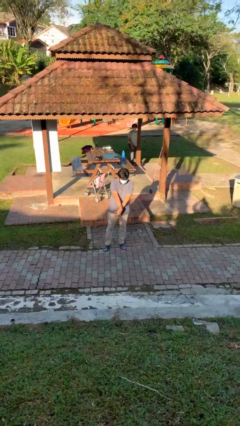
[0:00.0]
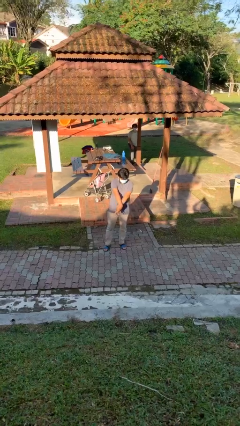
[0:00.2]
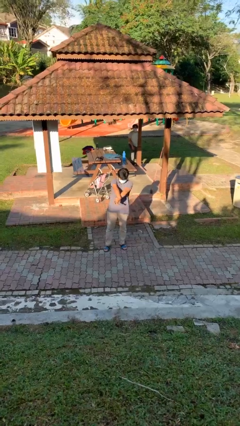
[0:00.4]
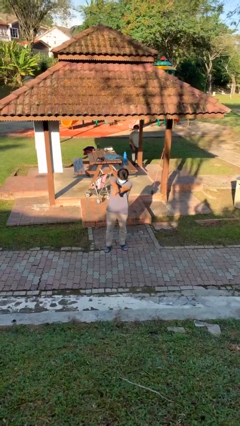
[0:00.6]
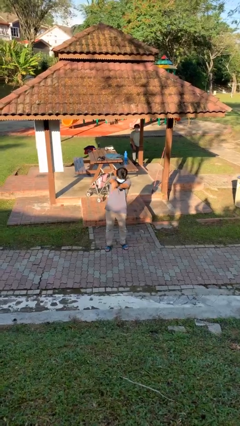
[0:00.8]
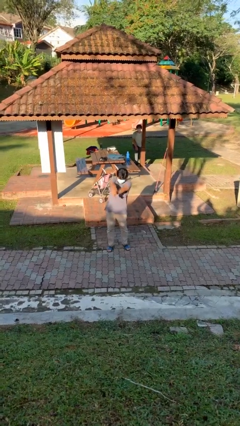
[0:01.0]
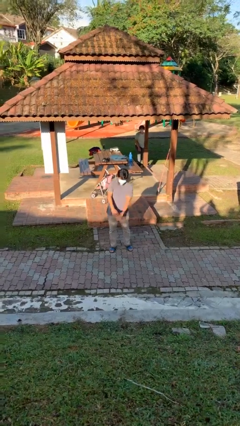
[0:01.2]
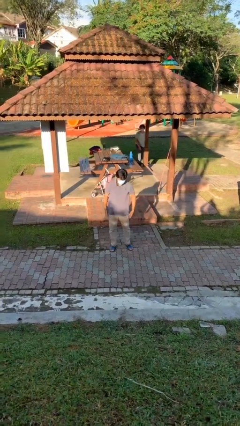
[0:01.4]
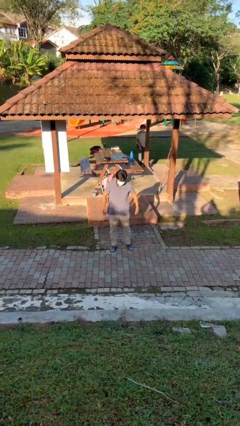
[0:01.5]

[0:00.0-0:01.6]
person crosses arms

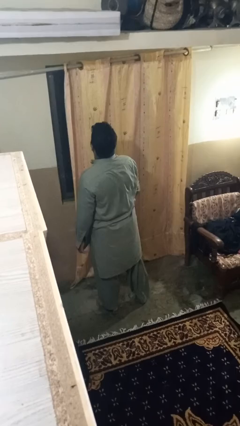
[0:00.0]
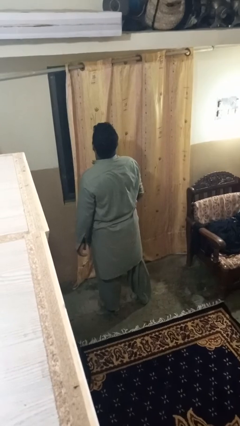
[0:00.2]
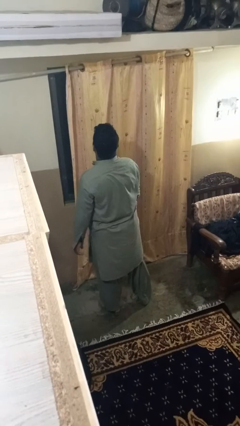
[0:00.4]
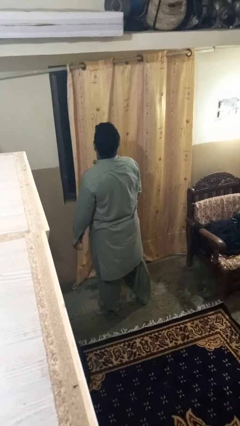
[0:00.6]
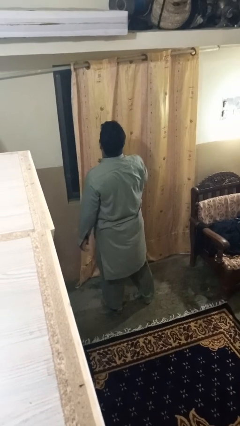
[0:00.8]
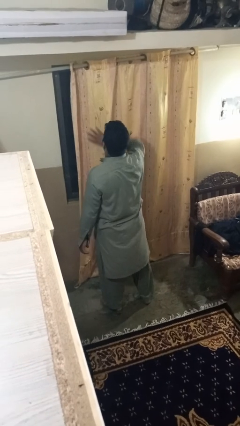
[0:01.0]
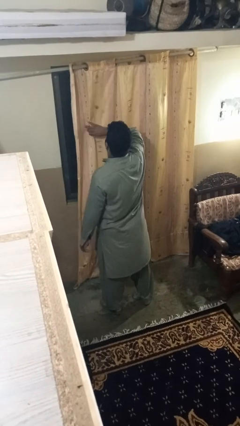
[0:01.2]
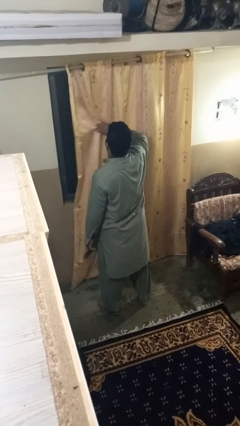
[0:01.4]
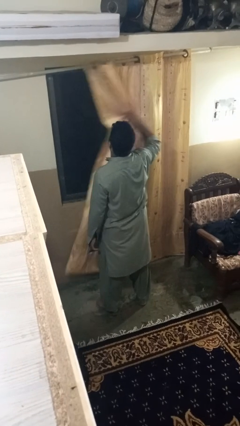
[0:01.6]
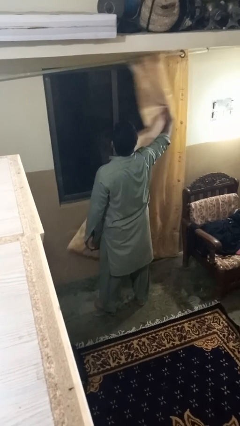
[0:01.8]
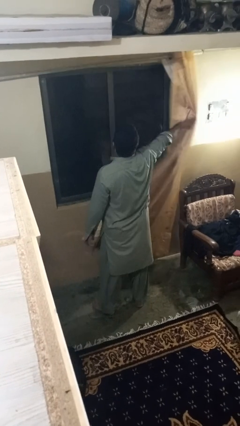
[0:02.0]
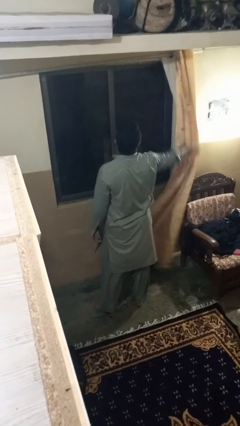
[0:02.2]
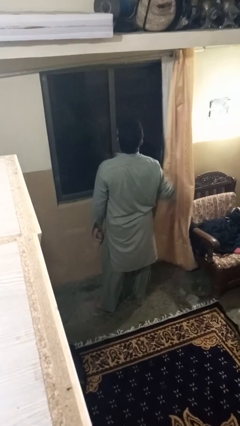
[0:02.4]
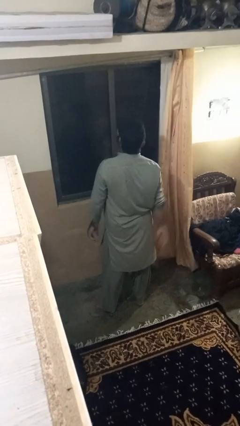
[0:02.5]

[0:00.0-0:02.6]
person opens curtains

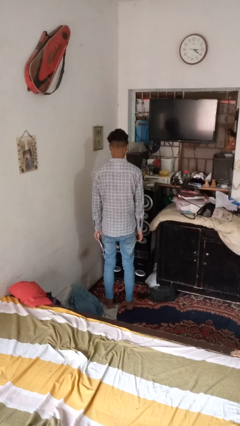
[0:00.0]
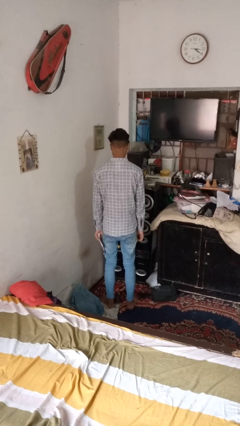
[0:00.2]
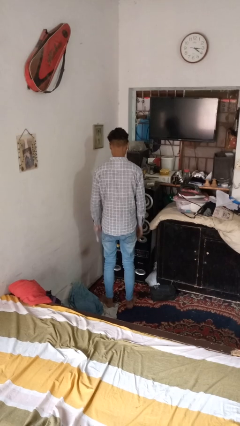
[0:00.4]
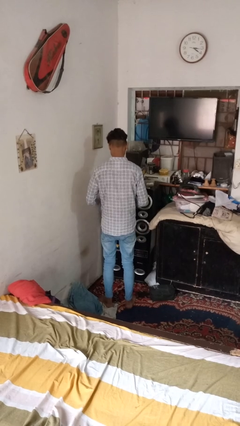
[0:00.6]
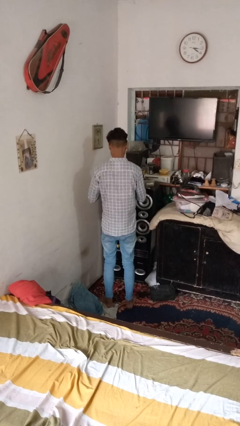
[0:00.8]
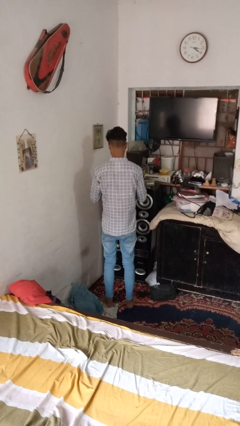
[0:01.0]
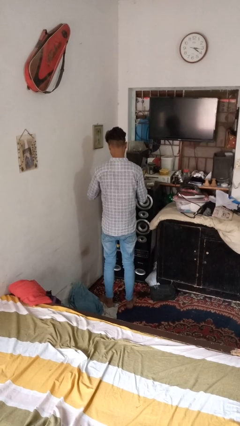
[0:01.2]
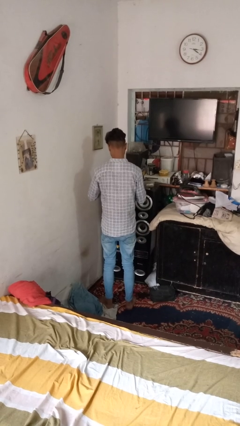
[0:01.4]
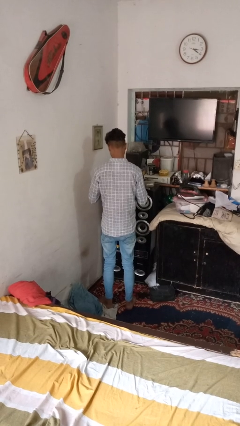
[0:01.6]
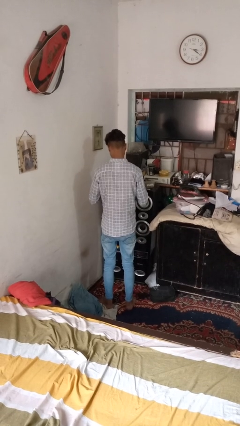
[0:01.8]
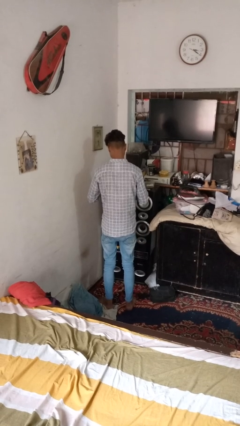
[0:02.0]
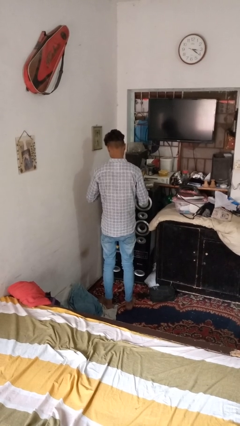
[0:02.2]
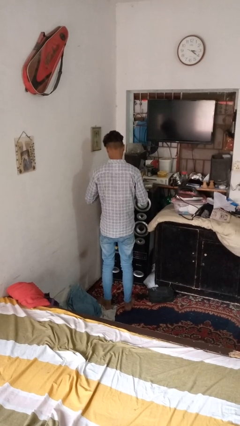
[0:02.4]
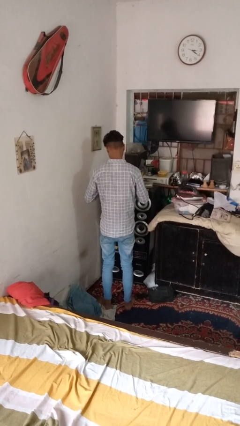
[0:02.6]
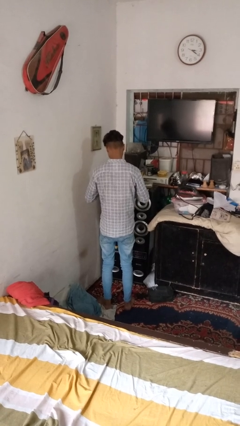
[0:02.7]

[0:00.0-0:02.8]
person tears paper

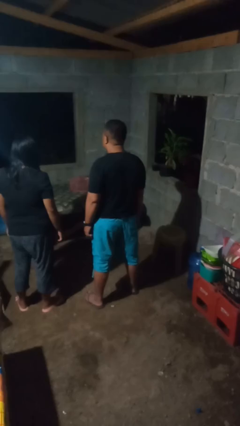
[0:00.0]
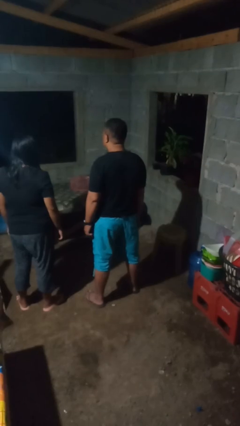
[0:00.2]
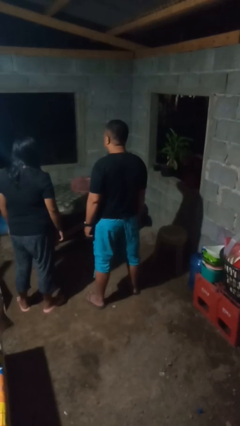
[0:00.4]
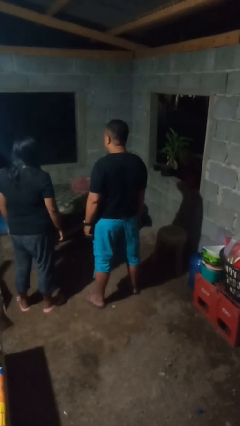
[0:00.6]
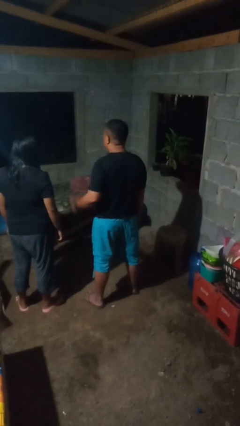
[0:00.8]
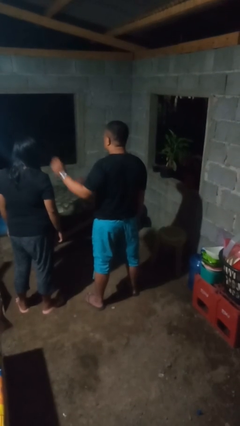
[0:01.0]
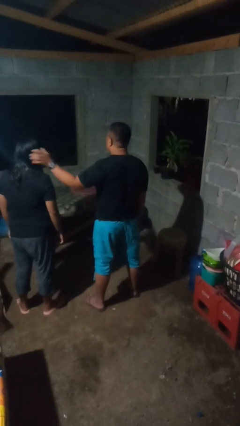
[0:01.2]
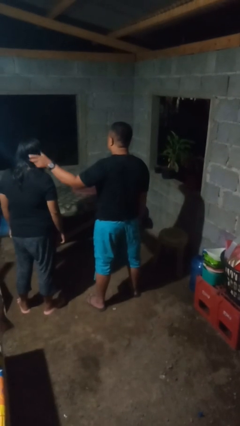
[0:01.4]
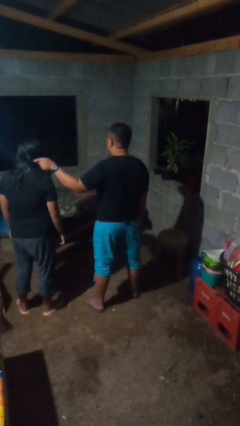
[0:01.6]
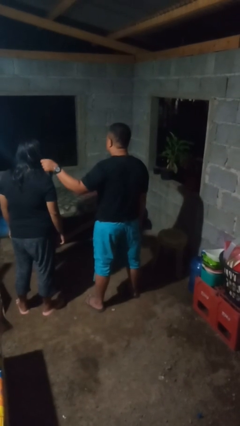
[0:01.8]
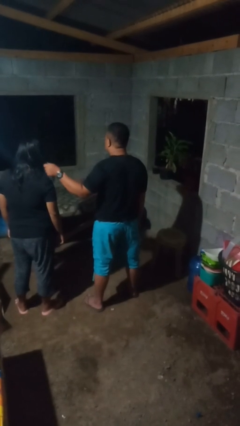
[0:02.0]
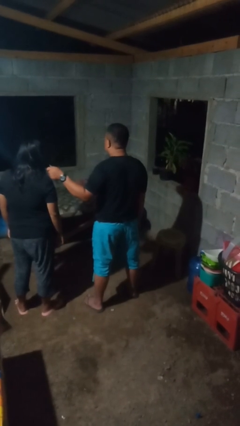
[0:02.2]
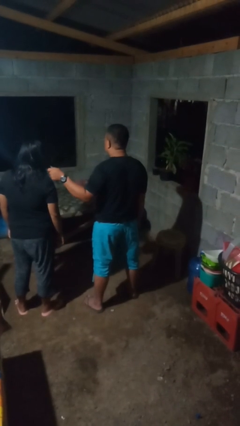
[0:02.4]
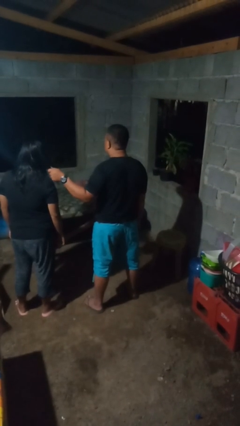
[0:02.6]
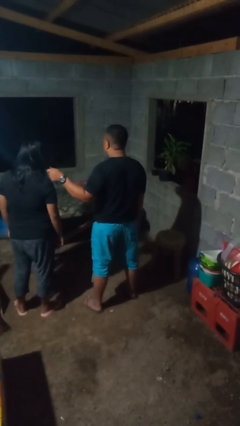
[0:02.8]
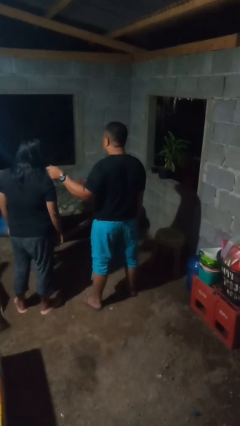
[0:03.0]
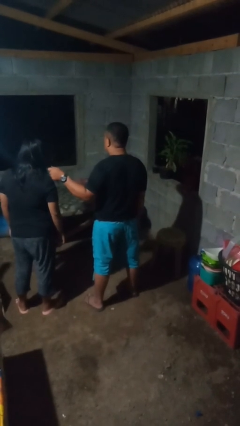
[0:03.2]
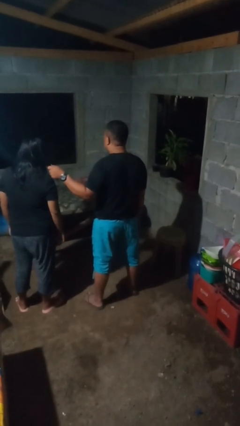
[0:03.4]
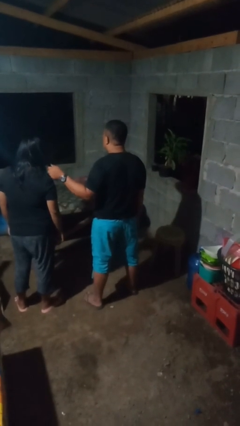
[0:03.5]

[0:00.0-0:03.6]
person grabs person by hair

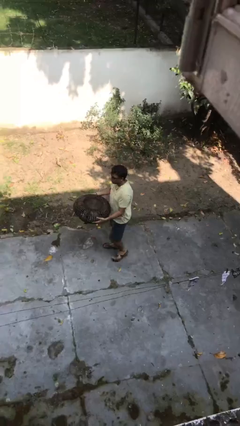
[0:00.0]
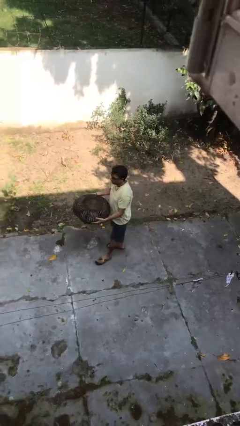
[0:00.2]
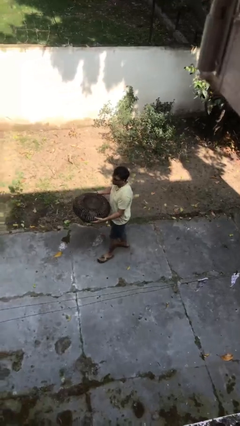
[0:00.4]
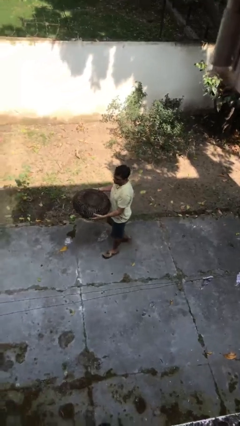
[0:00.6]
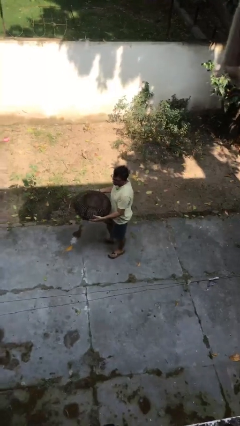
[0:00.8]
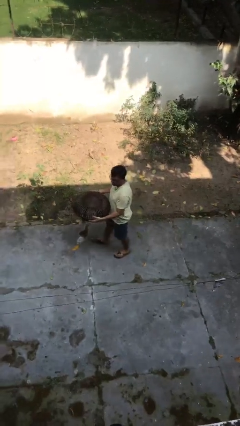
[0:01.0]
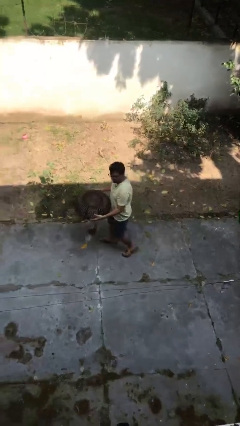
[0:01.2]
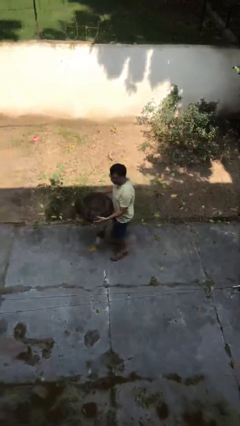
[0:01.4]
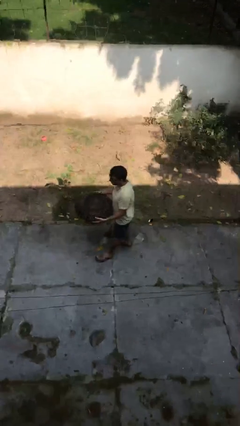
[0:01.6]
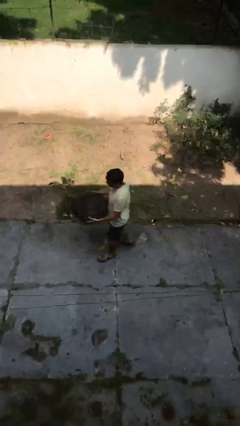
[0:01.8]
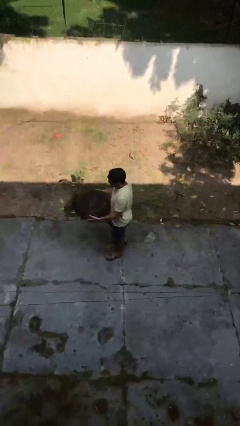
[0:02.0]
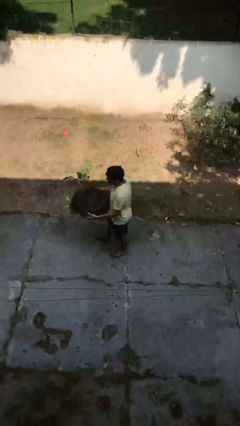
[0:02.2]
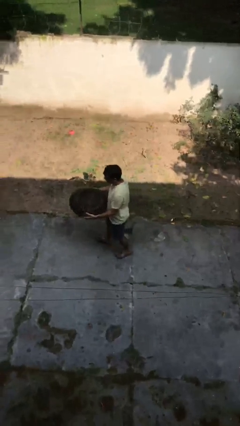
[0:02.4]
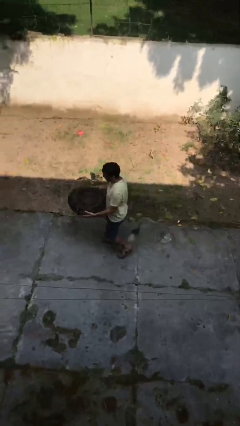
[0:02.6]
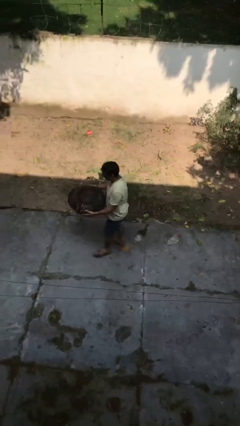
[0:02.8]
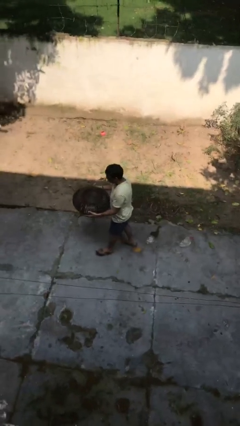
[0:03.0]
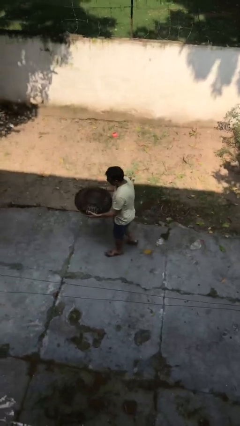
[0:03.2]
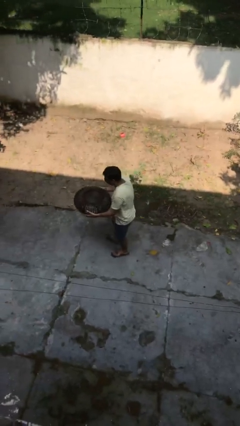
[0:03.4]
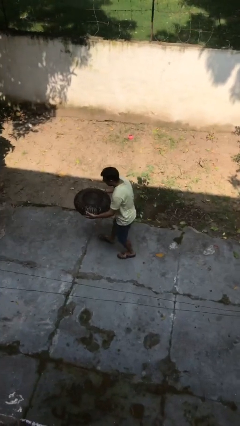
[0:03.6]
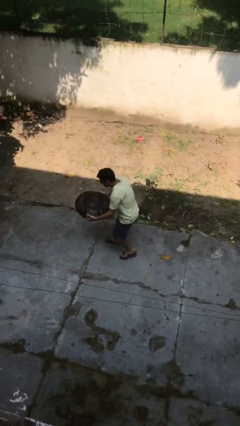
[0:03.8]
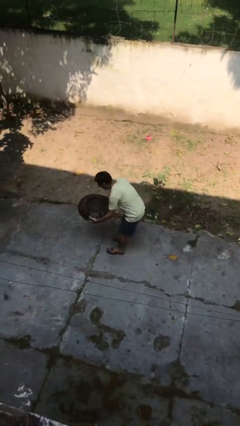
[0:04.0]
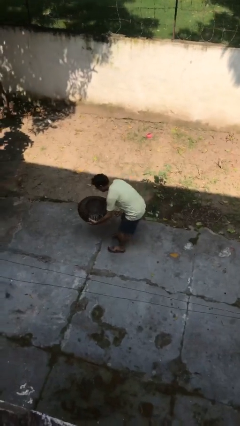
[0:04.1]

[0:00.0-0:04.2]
person carries heavy object

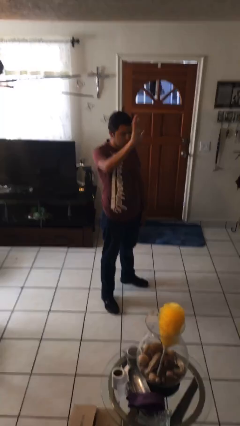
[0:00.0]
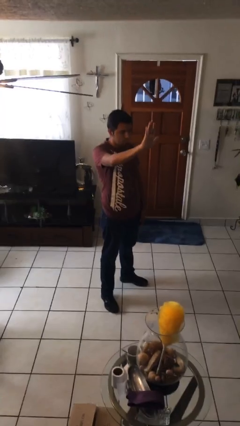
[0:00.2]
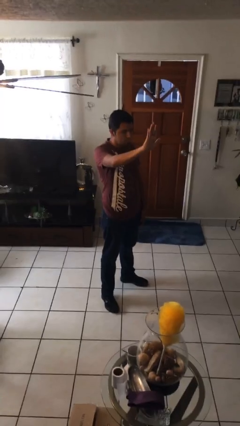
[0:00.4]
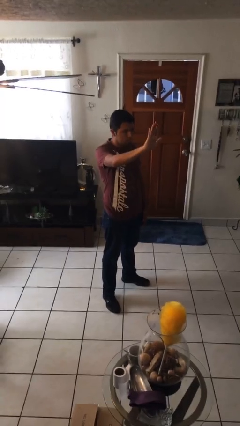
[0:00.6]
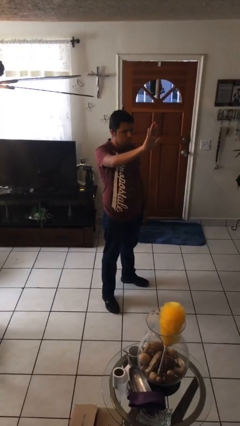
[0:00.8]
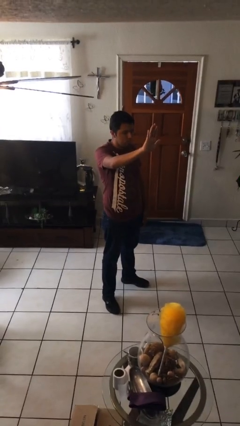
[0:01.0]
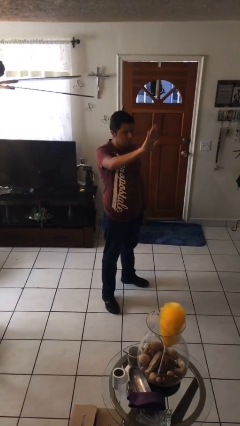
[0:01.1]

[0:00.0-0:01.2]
person gestures stop

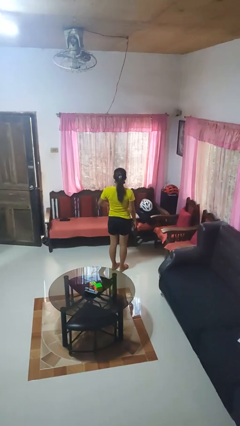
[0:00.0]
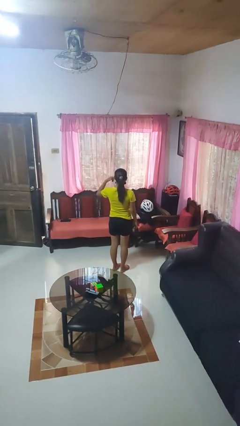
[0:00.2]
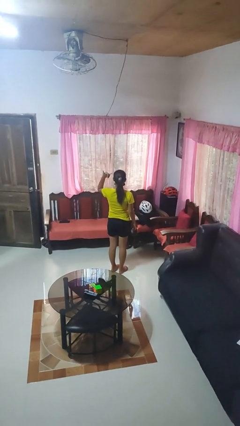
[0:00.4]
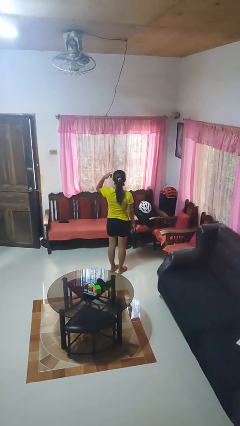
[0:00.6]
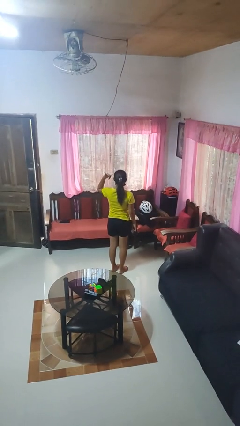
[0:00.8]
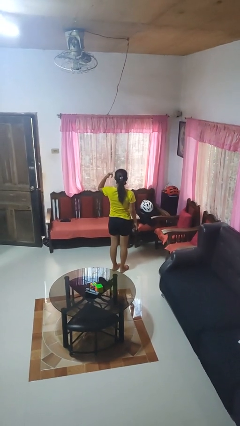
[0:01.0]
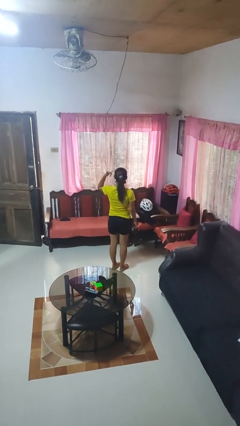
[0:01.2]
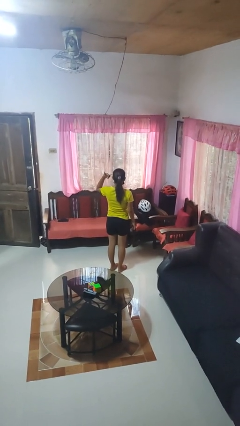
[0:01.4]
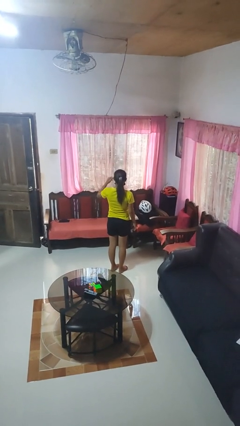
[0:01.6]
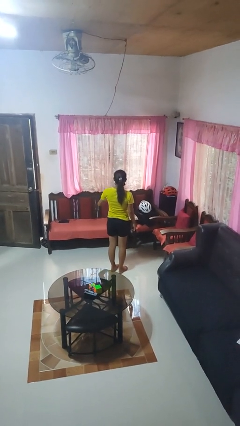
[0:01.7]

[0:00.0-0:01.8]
person gestures hang loose
